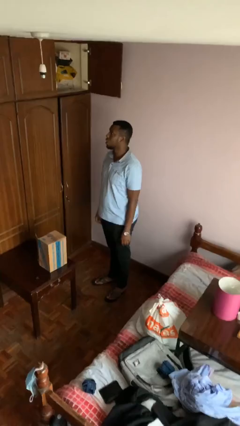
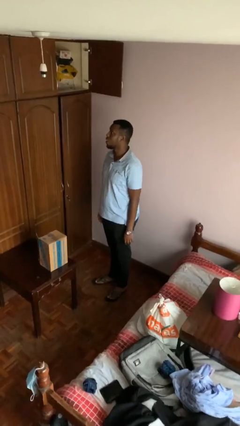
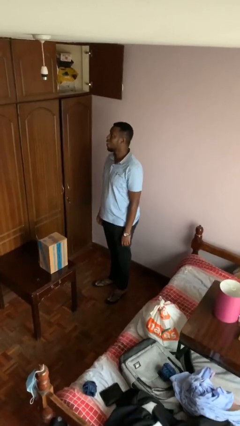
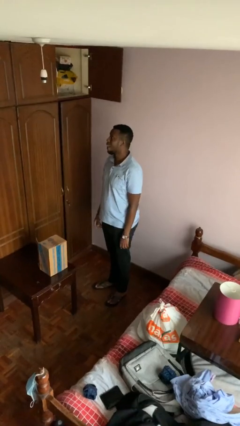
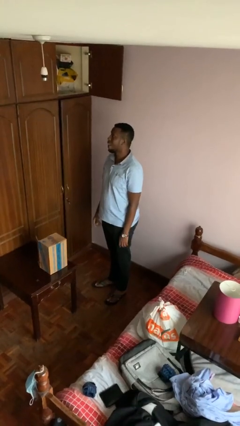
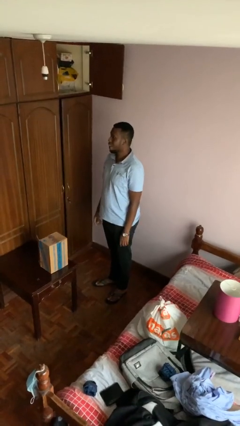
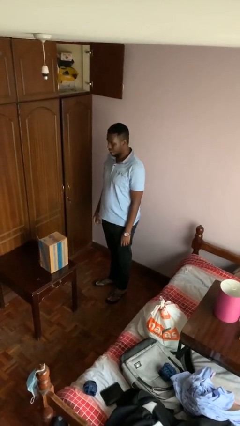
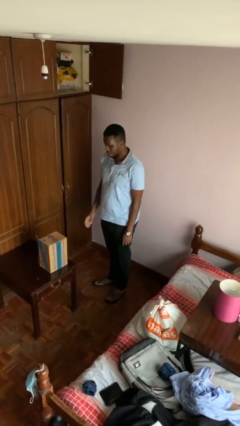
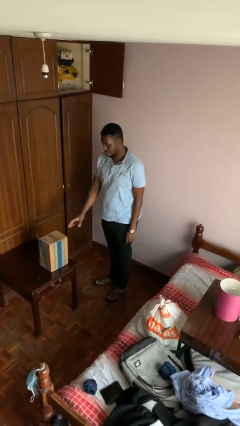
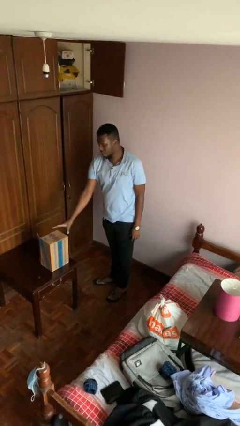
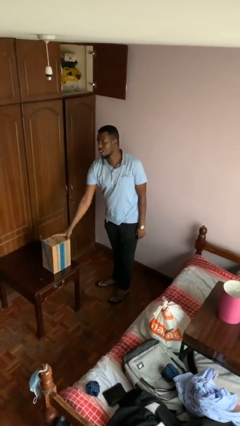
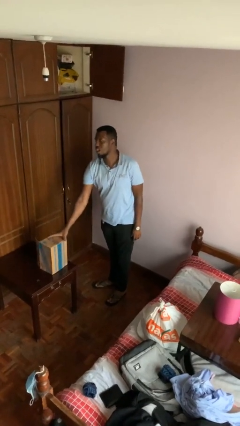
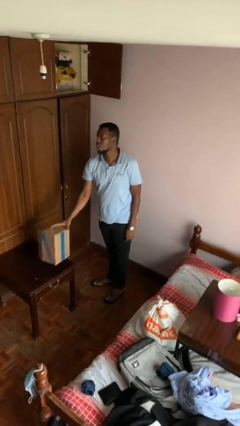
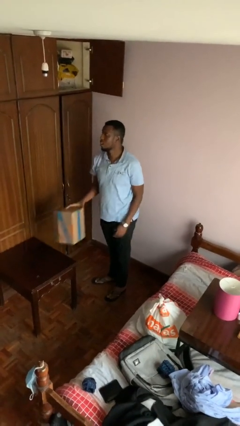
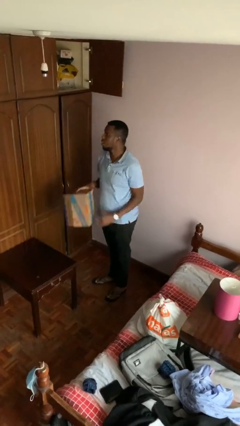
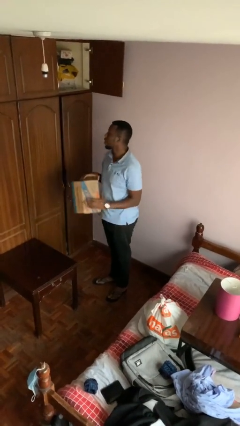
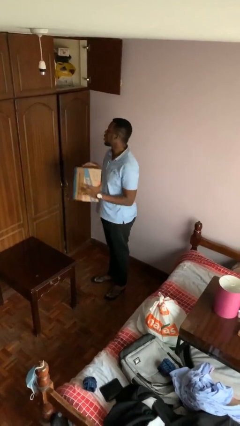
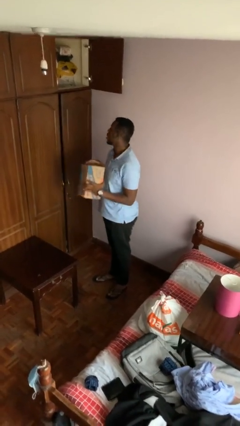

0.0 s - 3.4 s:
person picks up object from table

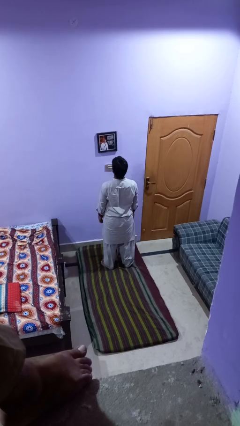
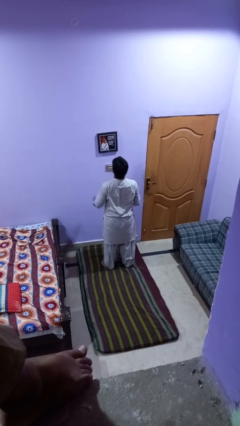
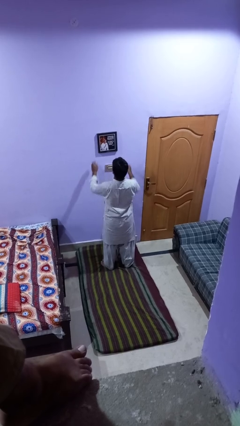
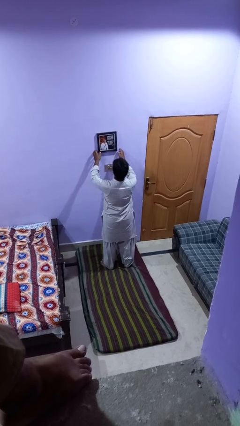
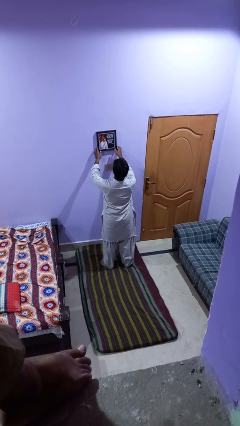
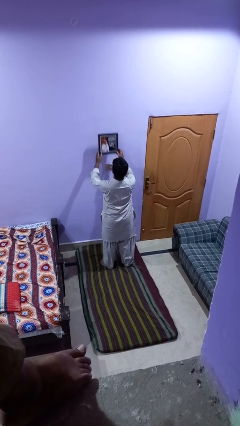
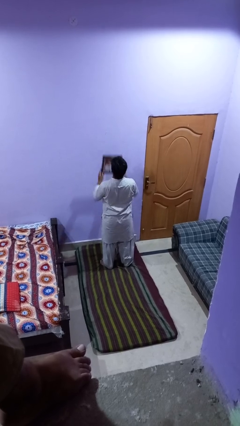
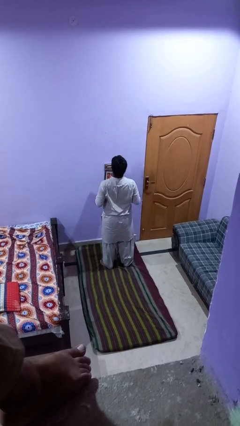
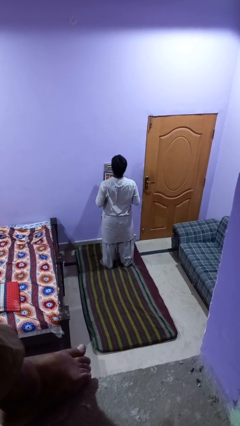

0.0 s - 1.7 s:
person takes down picture frame
